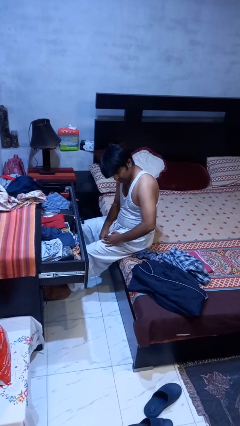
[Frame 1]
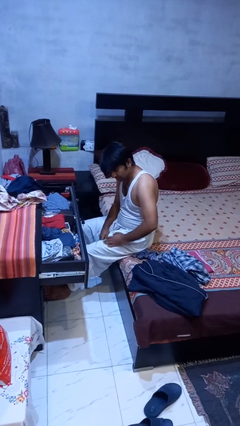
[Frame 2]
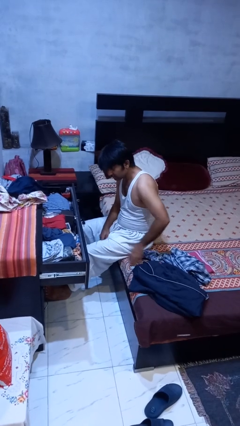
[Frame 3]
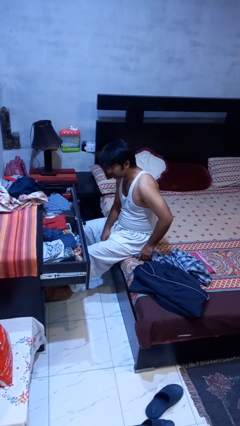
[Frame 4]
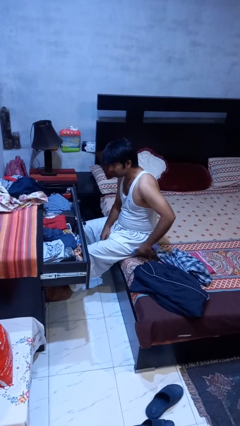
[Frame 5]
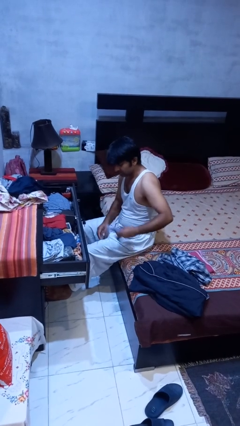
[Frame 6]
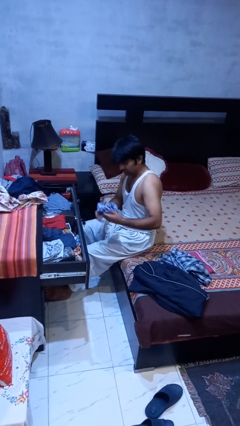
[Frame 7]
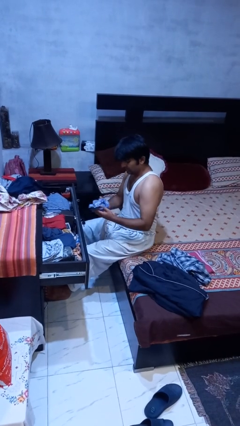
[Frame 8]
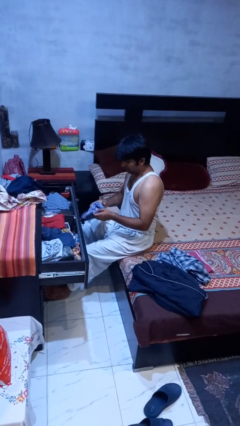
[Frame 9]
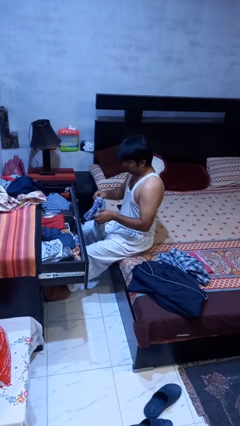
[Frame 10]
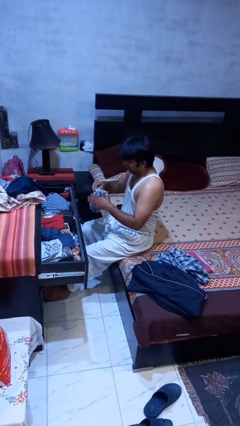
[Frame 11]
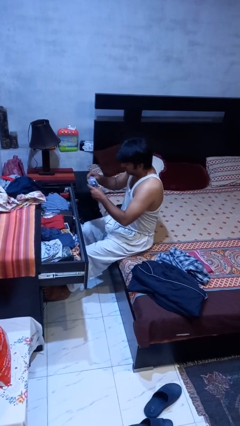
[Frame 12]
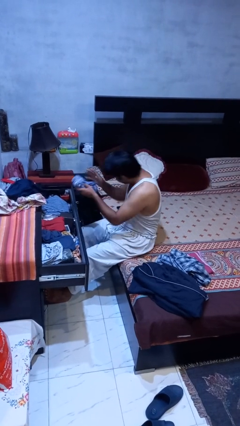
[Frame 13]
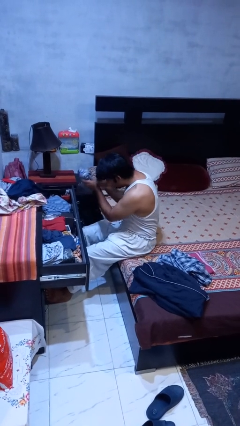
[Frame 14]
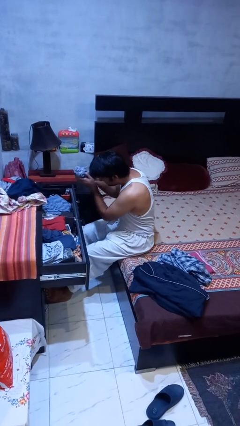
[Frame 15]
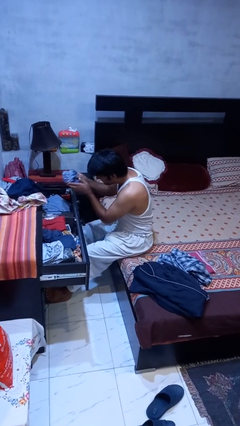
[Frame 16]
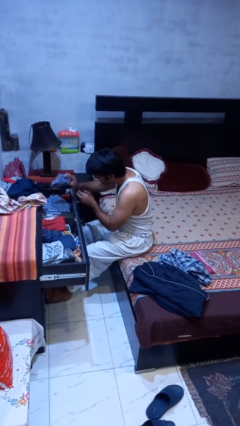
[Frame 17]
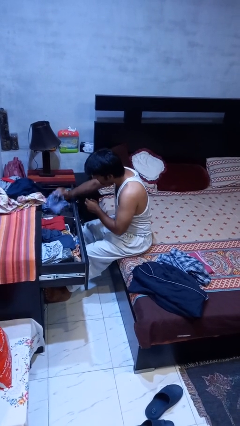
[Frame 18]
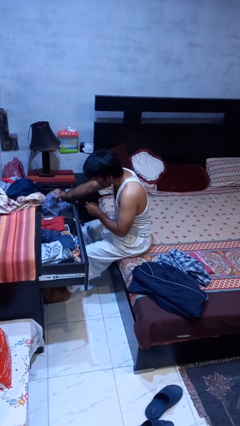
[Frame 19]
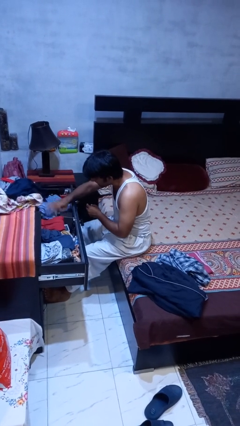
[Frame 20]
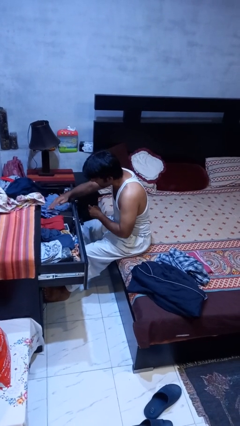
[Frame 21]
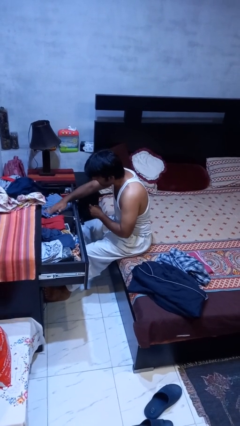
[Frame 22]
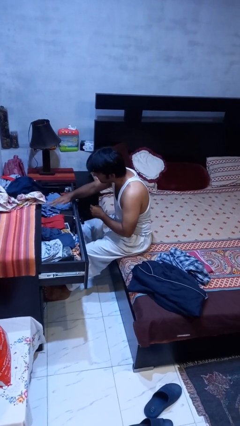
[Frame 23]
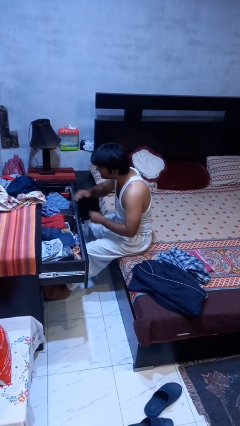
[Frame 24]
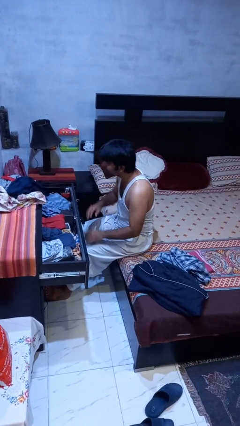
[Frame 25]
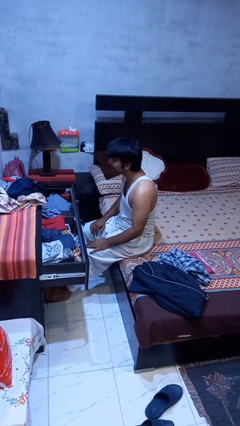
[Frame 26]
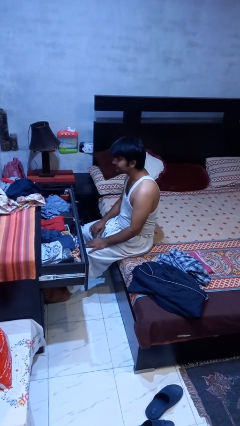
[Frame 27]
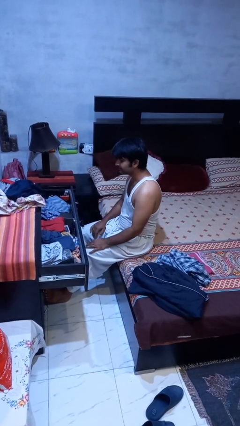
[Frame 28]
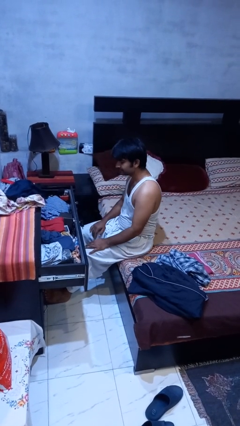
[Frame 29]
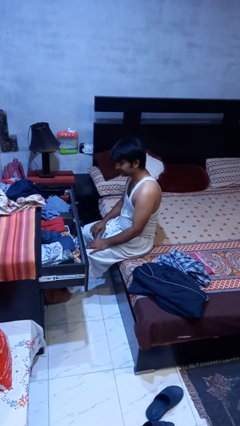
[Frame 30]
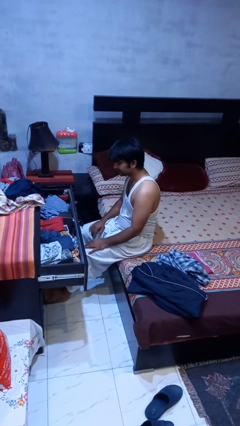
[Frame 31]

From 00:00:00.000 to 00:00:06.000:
person puts clothes into dresser

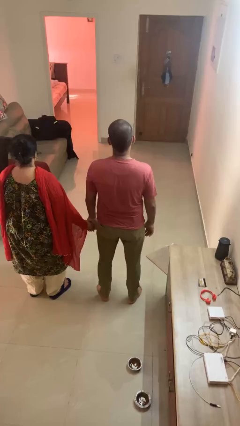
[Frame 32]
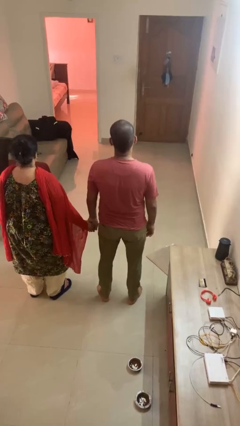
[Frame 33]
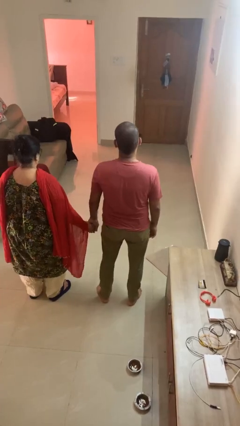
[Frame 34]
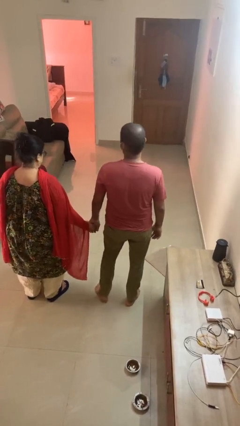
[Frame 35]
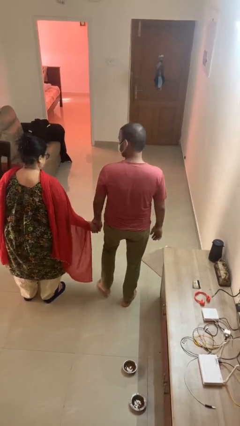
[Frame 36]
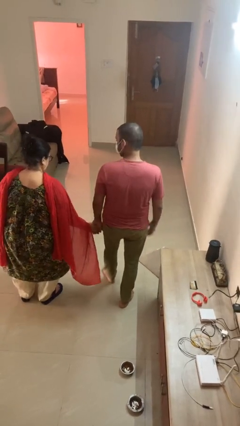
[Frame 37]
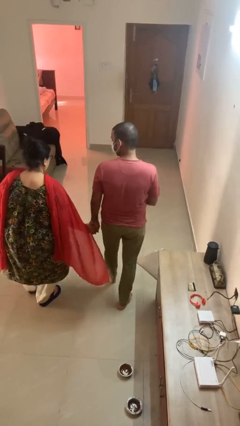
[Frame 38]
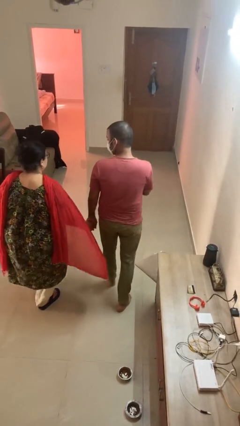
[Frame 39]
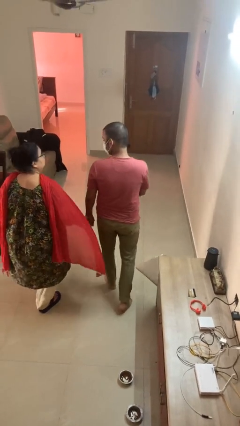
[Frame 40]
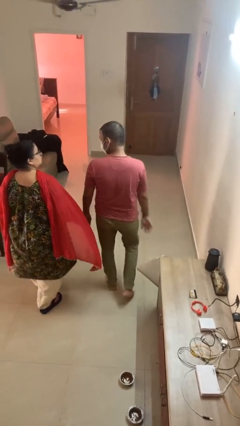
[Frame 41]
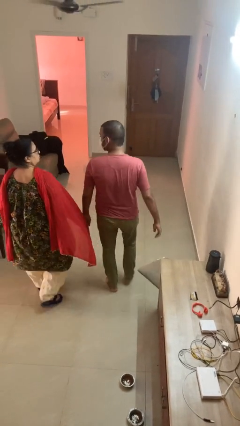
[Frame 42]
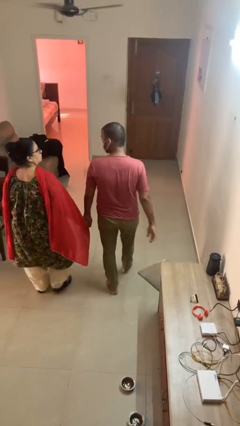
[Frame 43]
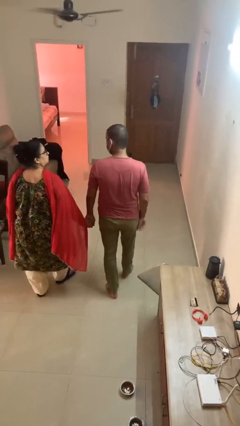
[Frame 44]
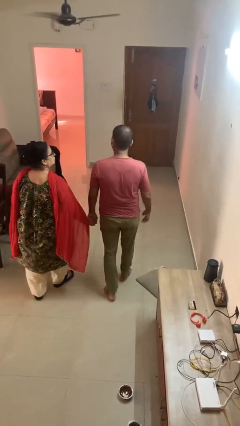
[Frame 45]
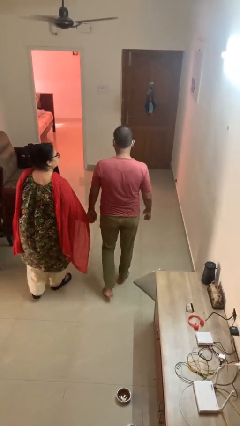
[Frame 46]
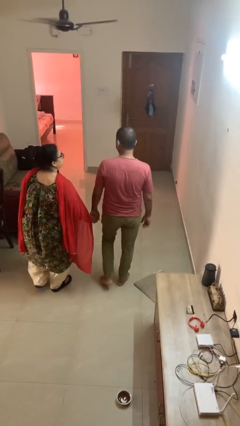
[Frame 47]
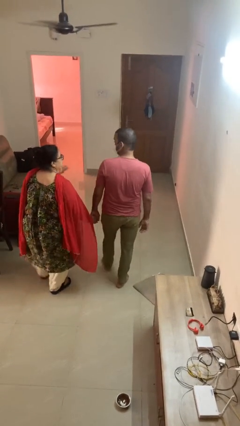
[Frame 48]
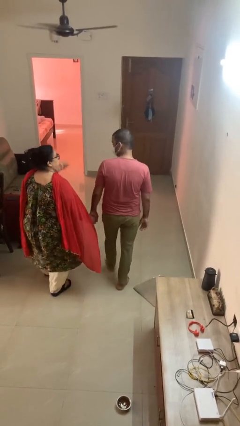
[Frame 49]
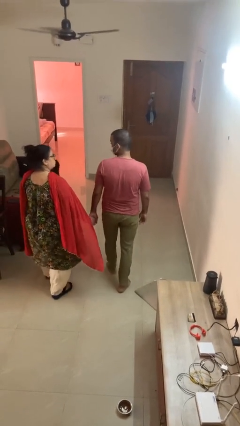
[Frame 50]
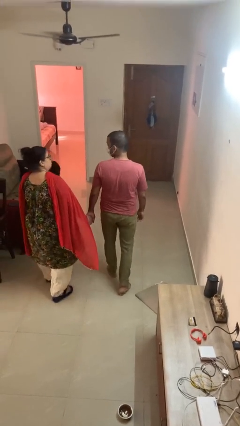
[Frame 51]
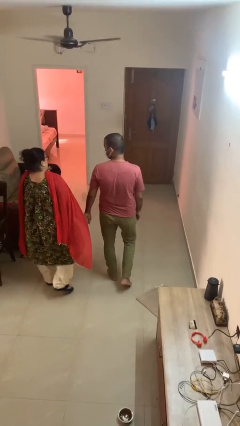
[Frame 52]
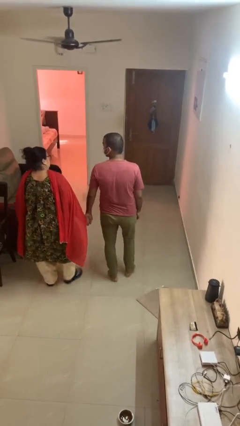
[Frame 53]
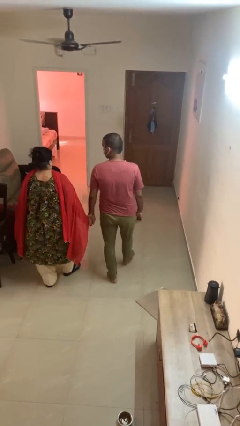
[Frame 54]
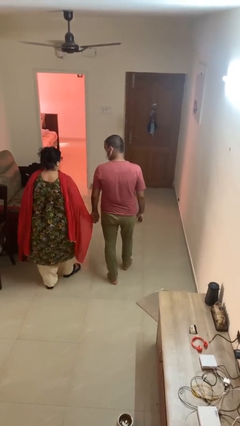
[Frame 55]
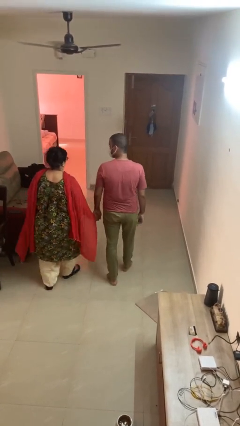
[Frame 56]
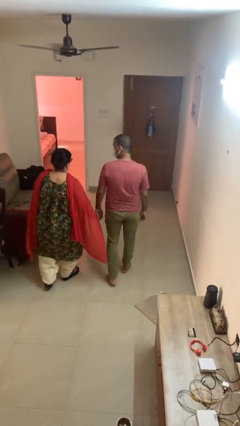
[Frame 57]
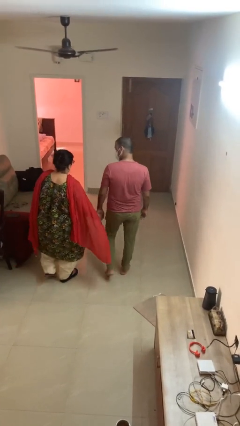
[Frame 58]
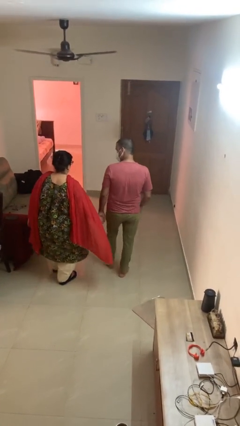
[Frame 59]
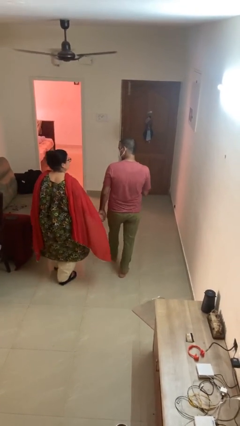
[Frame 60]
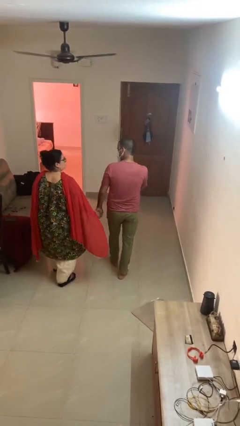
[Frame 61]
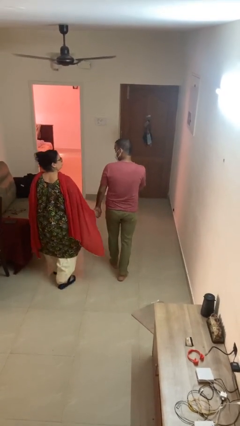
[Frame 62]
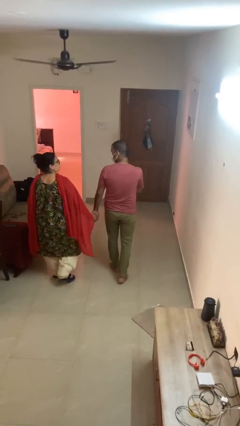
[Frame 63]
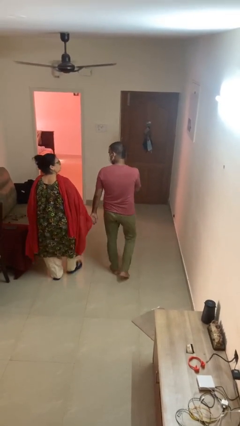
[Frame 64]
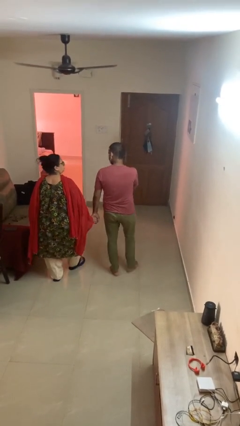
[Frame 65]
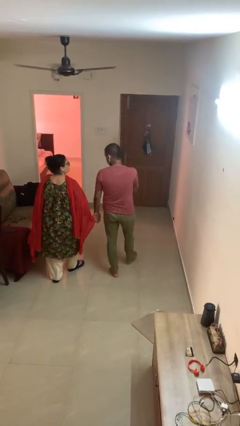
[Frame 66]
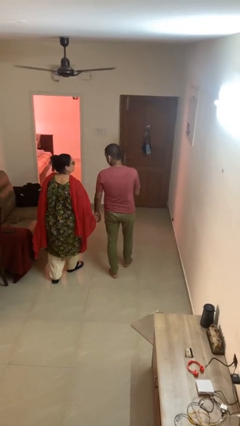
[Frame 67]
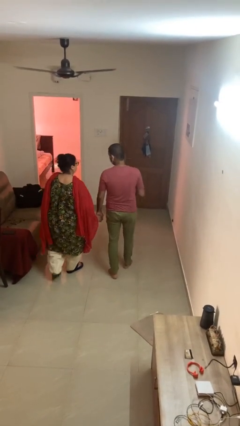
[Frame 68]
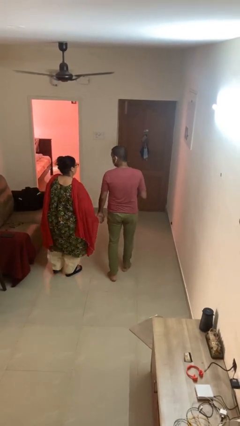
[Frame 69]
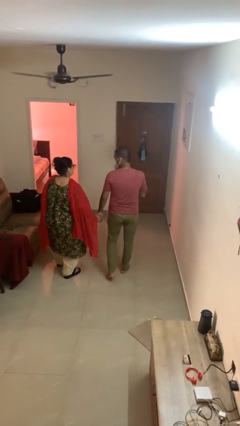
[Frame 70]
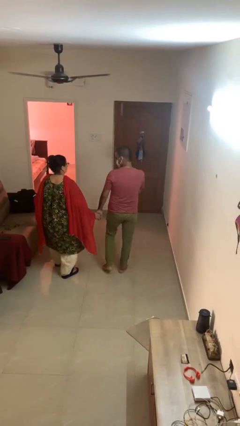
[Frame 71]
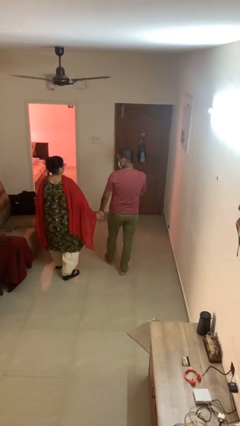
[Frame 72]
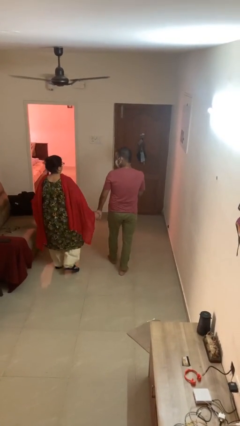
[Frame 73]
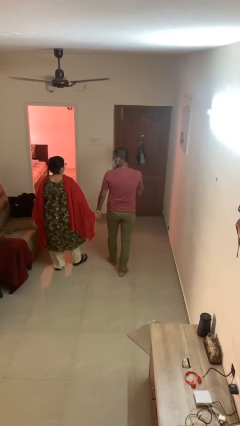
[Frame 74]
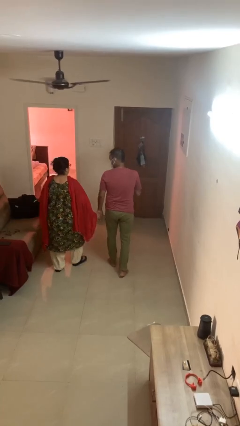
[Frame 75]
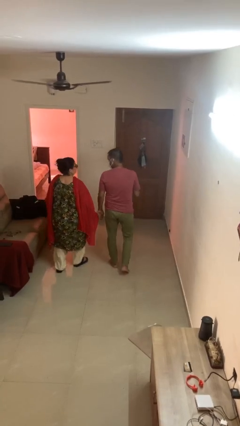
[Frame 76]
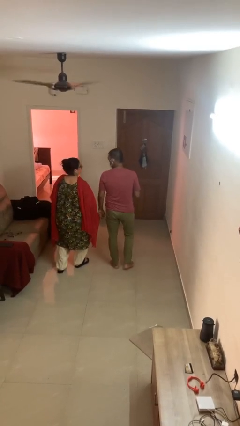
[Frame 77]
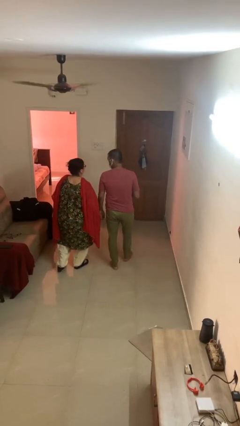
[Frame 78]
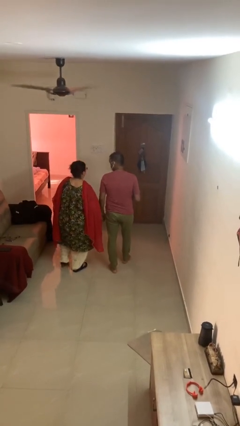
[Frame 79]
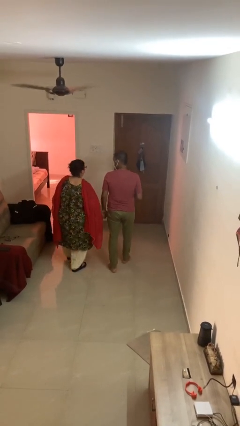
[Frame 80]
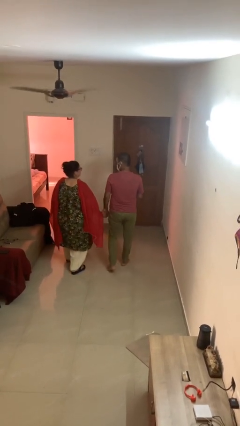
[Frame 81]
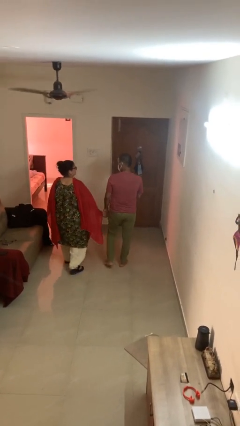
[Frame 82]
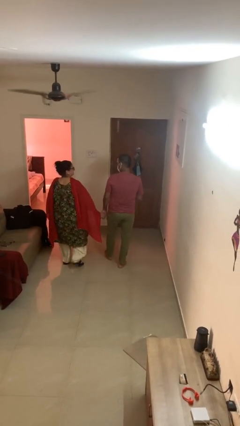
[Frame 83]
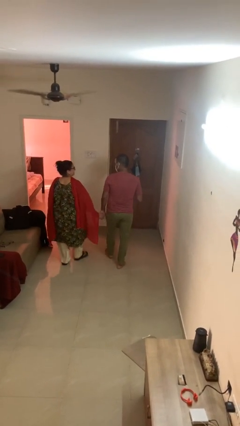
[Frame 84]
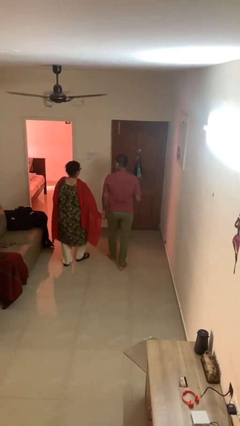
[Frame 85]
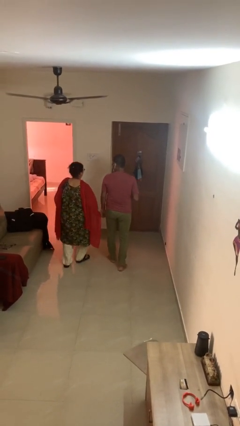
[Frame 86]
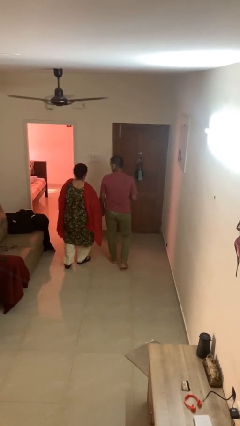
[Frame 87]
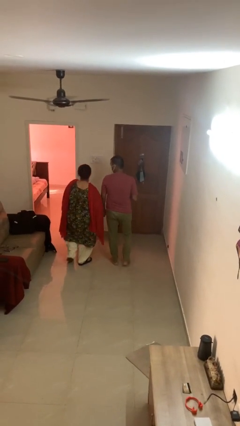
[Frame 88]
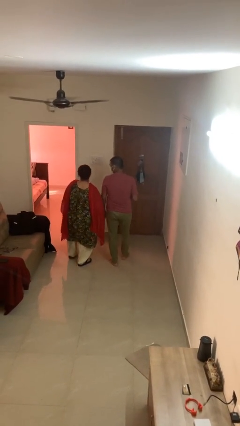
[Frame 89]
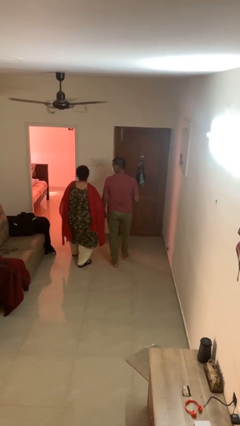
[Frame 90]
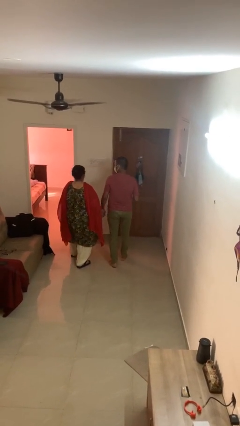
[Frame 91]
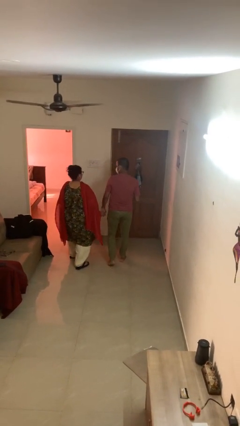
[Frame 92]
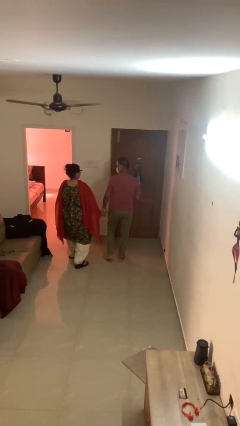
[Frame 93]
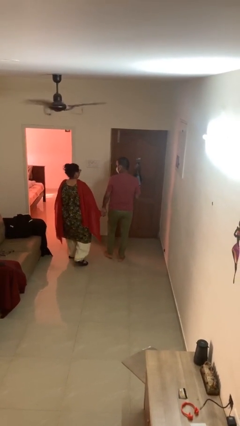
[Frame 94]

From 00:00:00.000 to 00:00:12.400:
person holds hand
